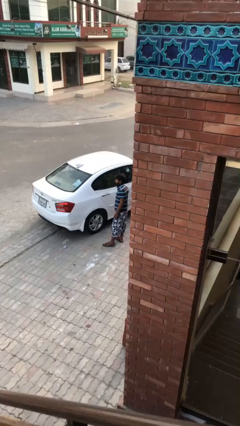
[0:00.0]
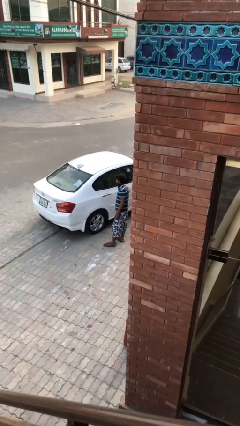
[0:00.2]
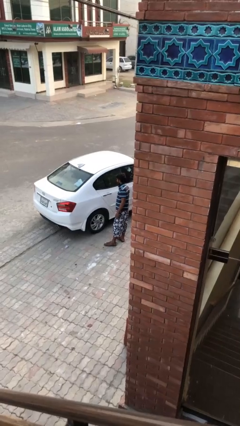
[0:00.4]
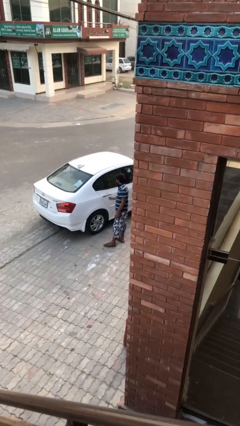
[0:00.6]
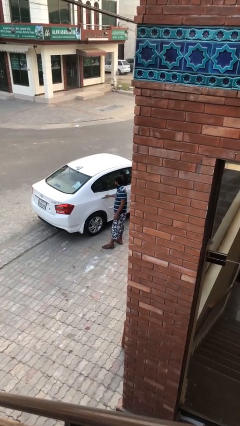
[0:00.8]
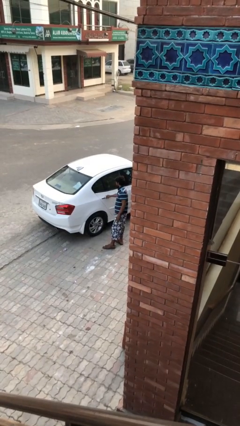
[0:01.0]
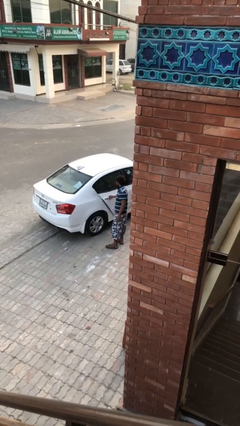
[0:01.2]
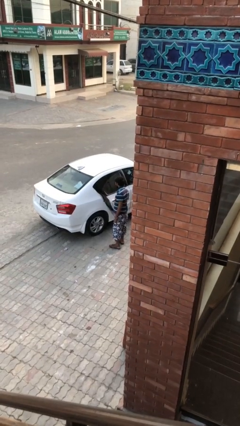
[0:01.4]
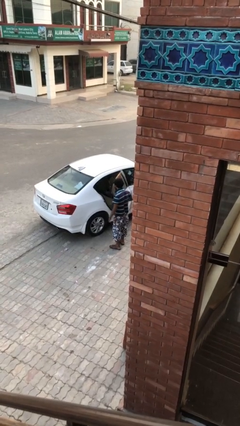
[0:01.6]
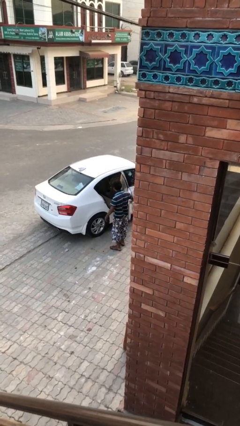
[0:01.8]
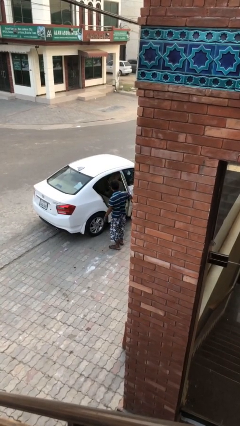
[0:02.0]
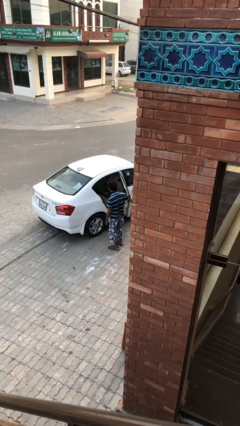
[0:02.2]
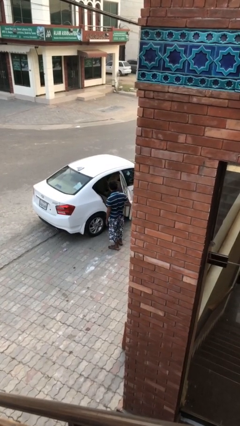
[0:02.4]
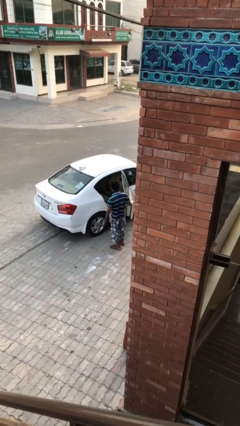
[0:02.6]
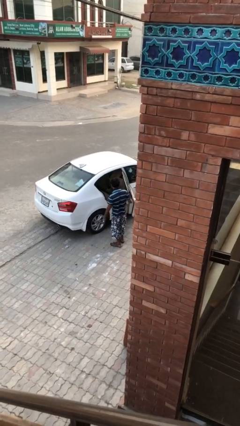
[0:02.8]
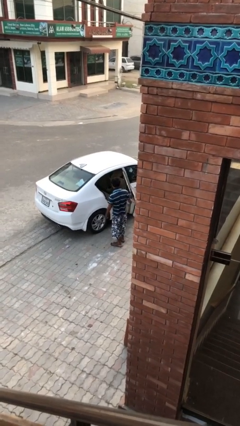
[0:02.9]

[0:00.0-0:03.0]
person opens car door

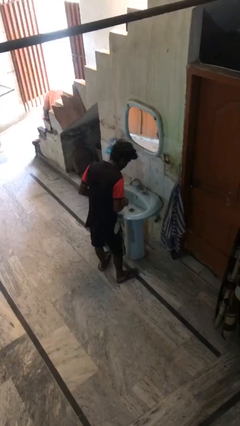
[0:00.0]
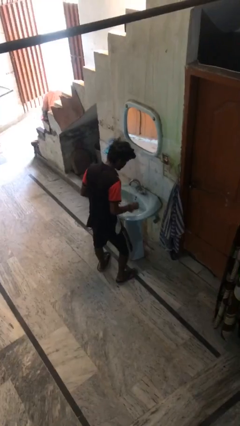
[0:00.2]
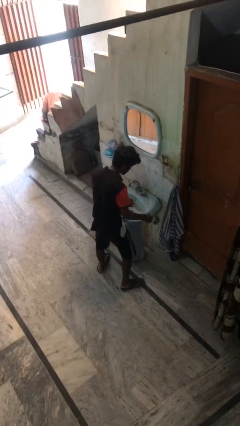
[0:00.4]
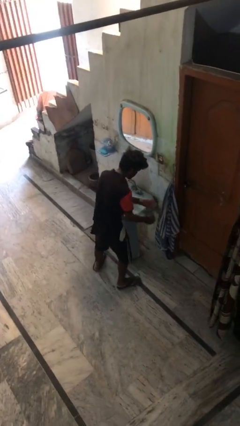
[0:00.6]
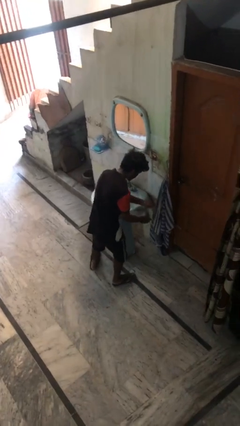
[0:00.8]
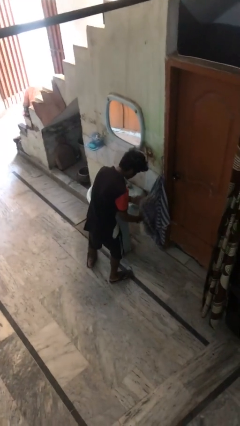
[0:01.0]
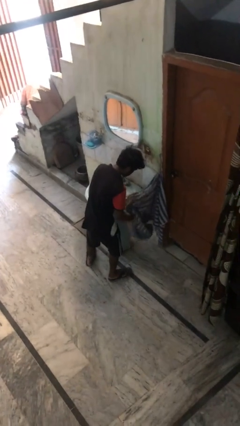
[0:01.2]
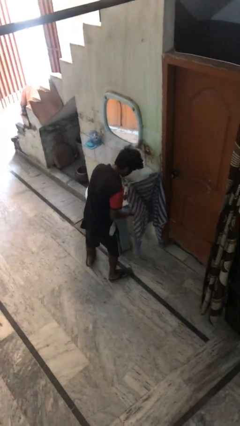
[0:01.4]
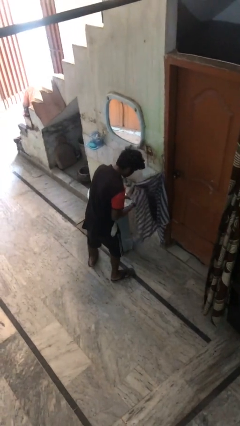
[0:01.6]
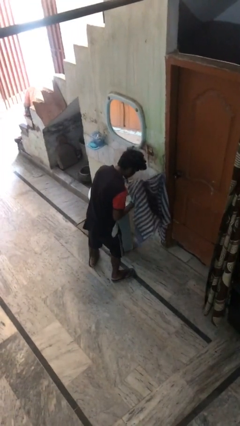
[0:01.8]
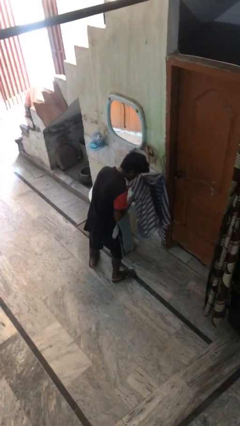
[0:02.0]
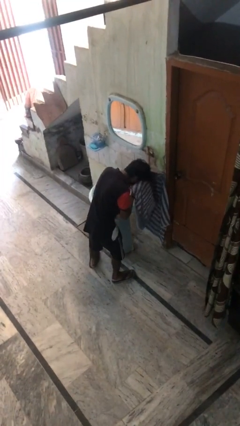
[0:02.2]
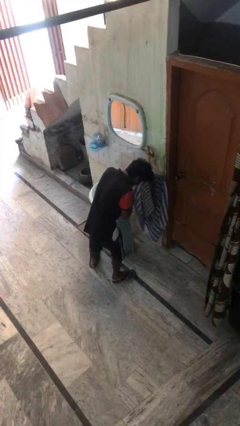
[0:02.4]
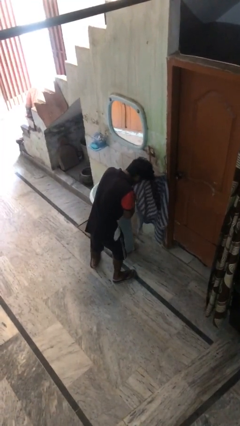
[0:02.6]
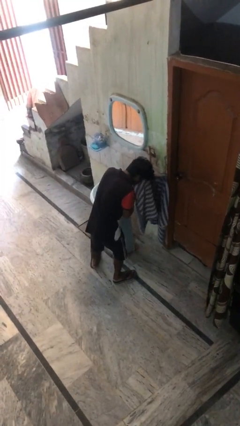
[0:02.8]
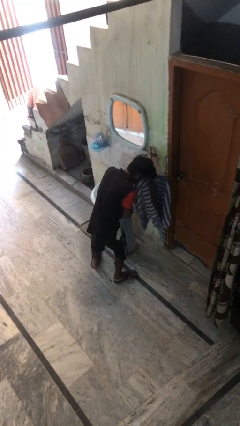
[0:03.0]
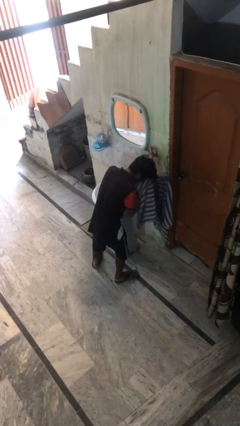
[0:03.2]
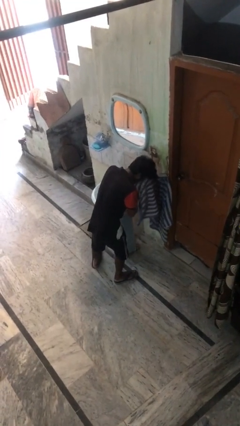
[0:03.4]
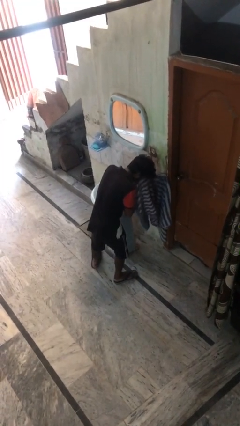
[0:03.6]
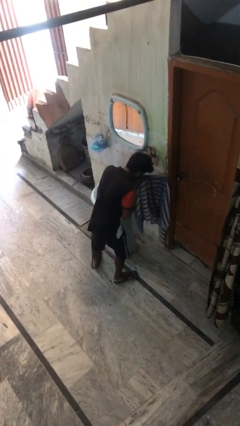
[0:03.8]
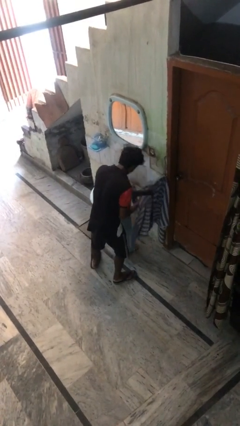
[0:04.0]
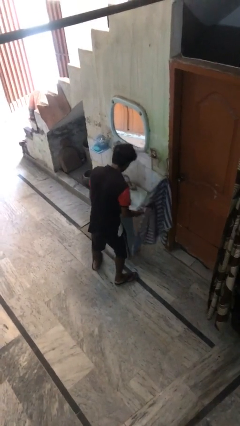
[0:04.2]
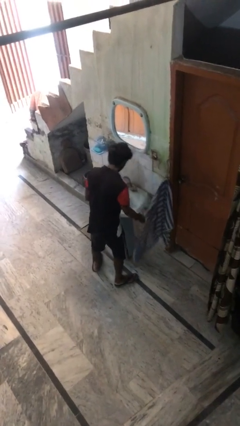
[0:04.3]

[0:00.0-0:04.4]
person dries face with towel

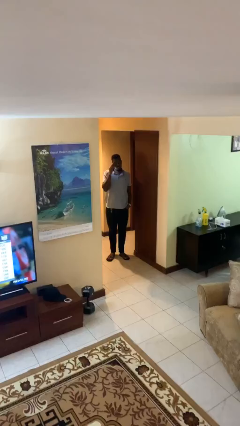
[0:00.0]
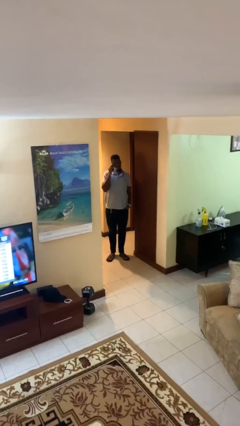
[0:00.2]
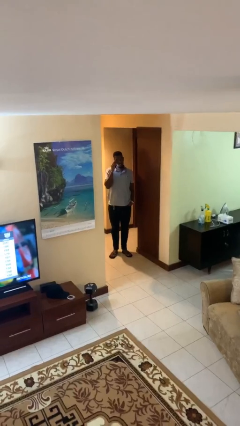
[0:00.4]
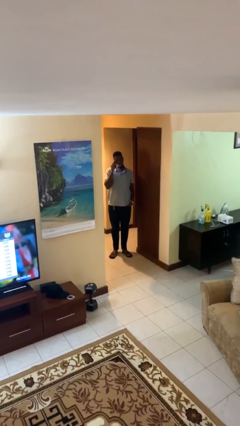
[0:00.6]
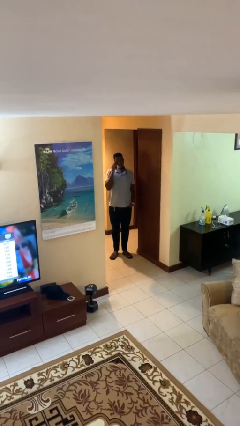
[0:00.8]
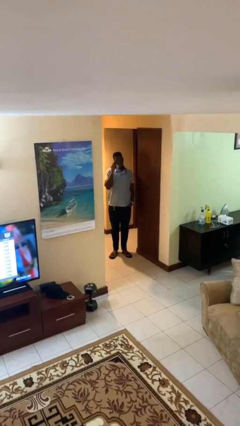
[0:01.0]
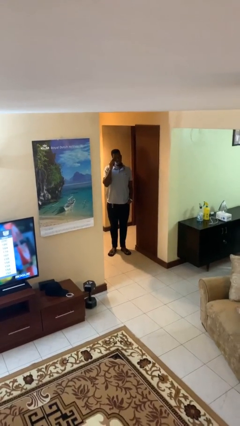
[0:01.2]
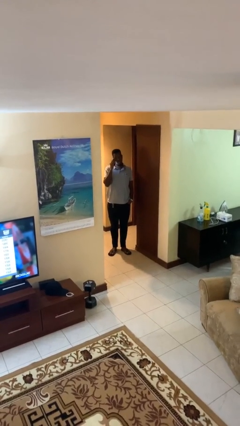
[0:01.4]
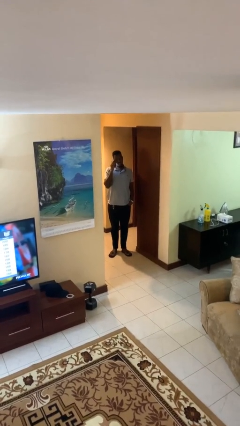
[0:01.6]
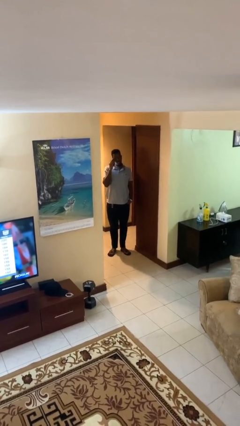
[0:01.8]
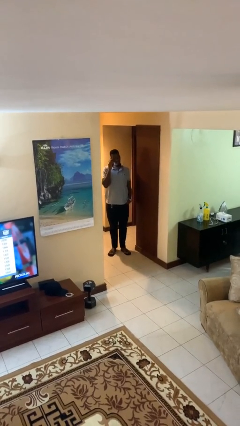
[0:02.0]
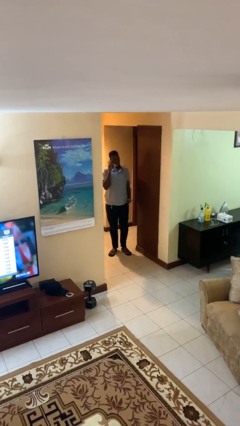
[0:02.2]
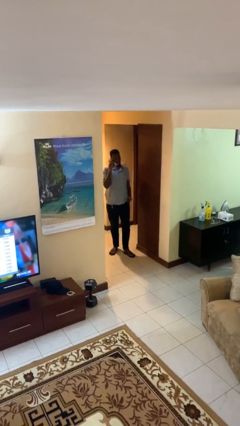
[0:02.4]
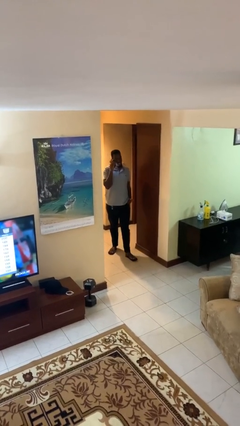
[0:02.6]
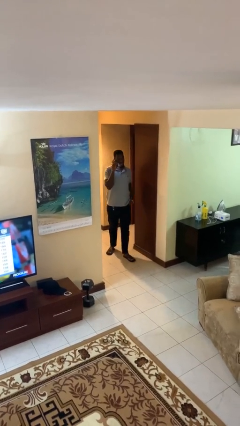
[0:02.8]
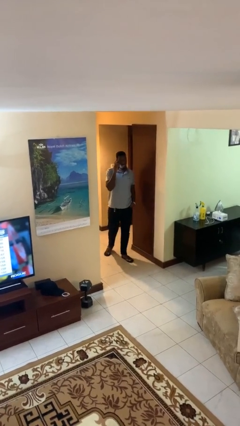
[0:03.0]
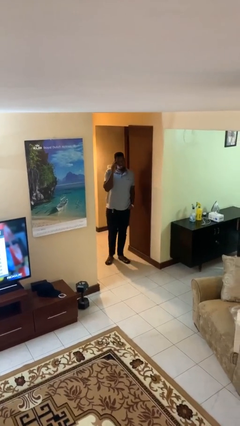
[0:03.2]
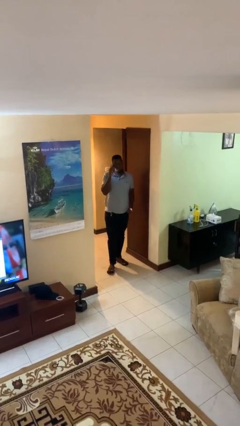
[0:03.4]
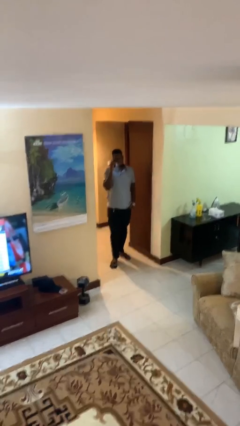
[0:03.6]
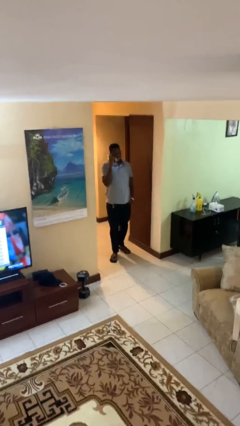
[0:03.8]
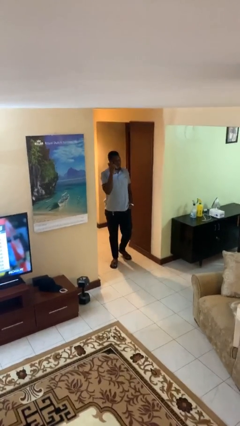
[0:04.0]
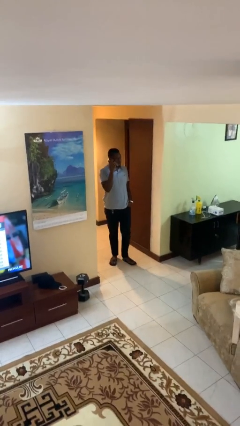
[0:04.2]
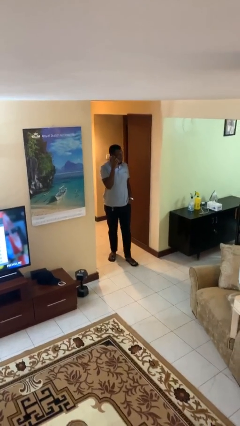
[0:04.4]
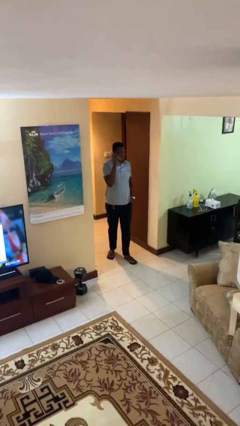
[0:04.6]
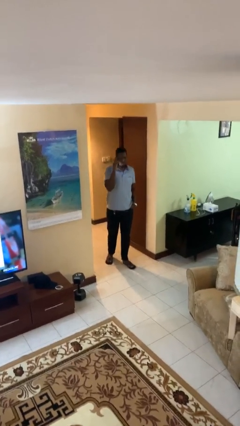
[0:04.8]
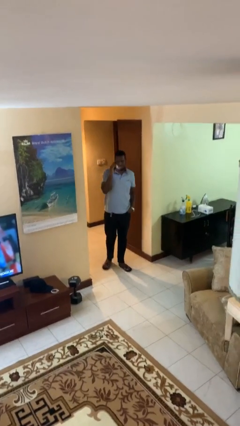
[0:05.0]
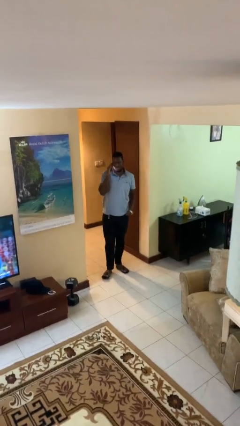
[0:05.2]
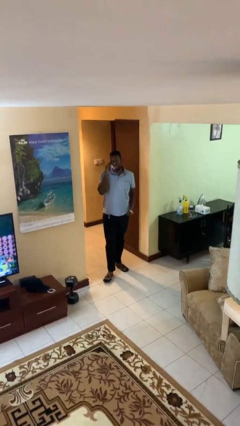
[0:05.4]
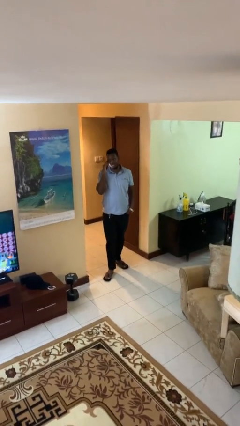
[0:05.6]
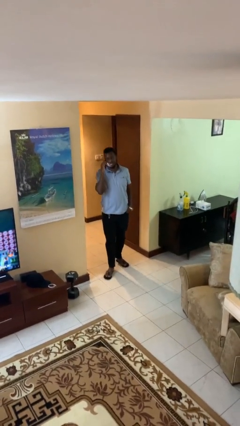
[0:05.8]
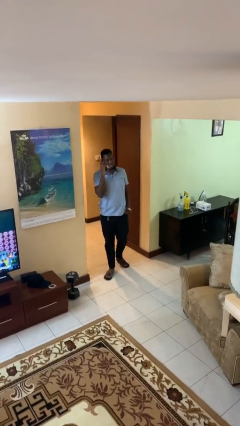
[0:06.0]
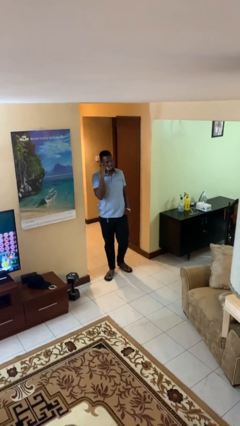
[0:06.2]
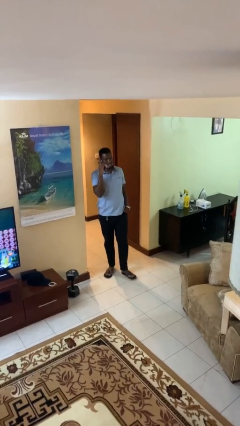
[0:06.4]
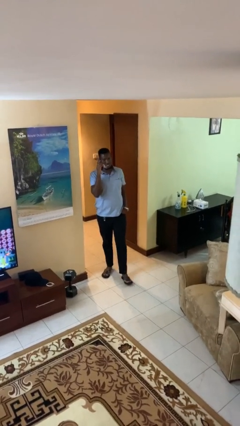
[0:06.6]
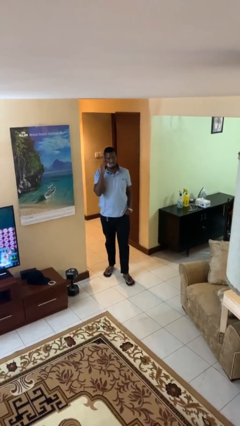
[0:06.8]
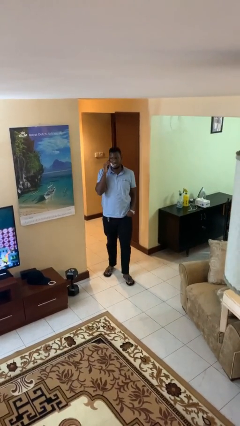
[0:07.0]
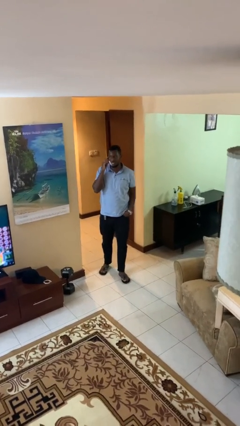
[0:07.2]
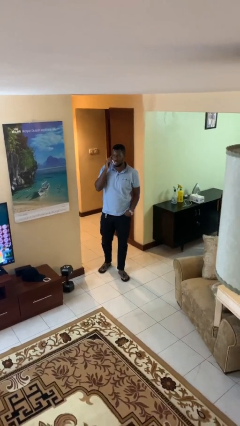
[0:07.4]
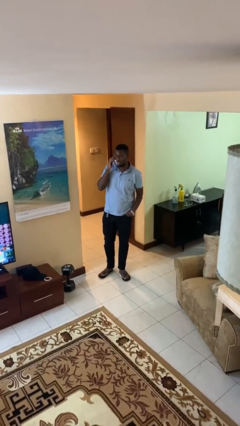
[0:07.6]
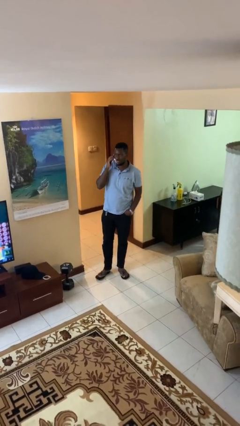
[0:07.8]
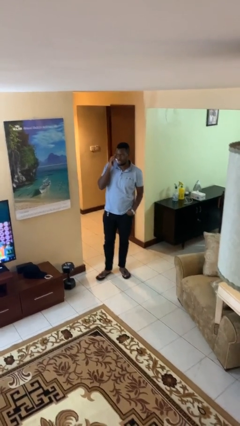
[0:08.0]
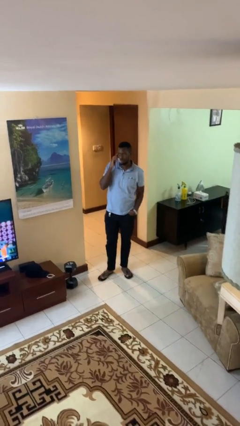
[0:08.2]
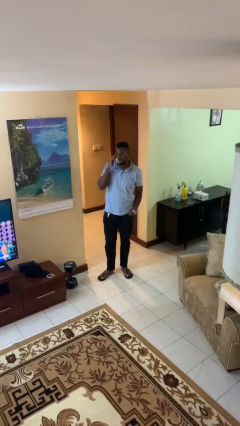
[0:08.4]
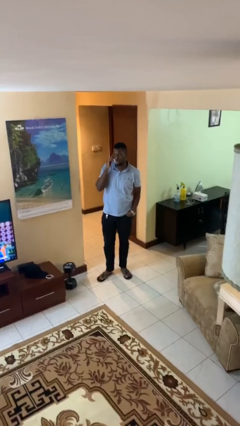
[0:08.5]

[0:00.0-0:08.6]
person enters scene through structure

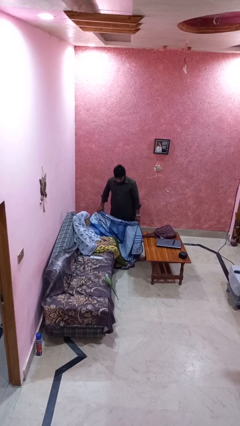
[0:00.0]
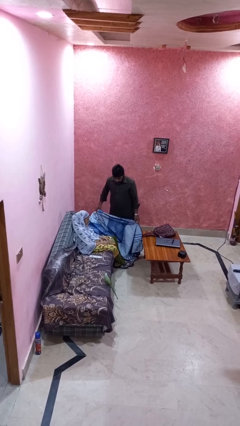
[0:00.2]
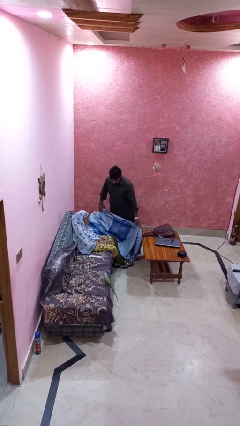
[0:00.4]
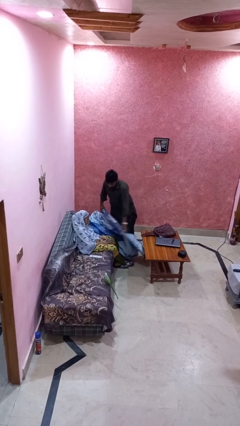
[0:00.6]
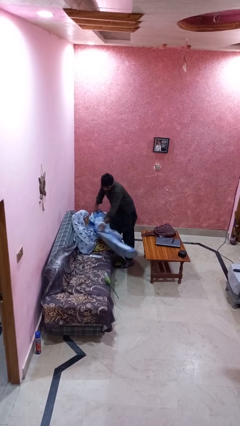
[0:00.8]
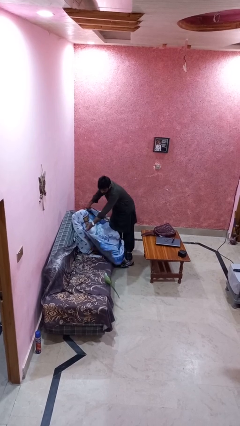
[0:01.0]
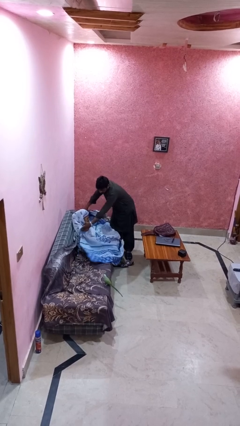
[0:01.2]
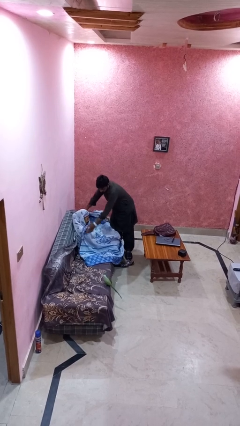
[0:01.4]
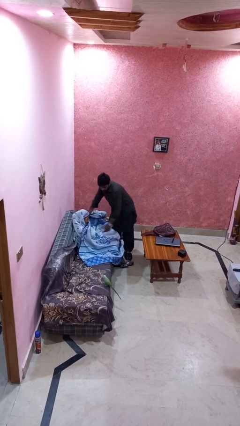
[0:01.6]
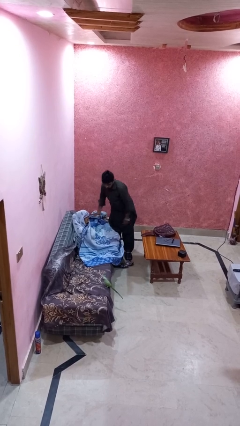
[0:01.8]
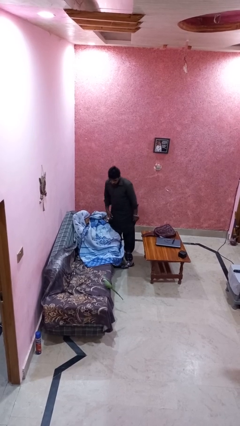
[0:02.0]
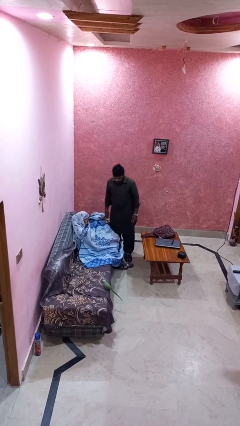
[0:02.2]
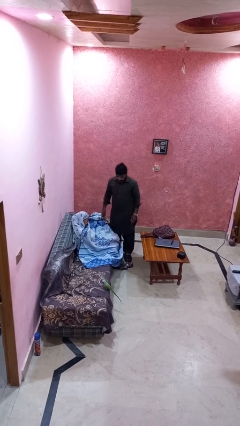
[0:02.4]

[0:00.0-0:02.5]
person covers friend with blanket
